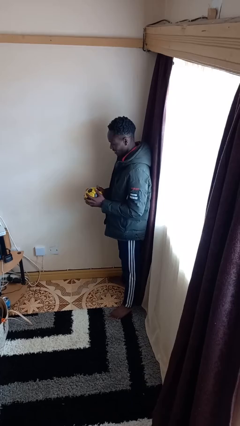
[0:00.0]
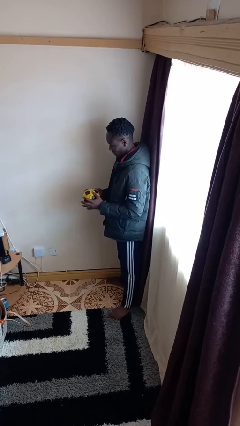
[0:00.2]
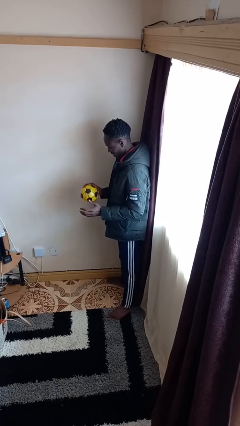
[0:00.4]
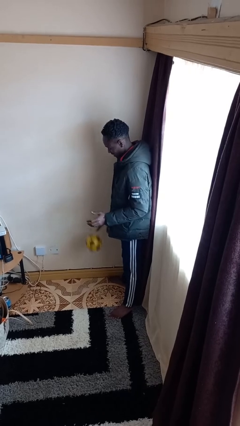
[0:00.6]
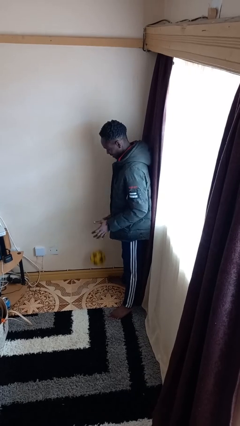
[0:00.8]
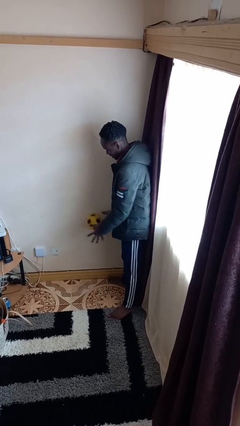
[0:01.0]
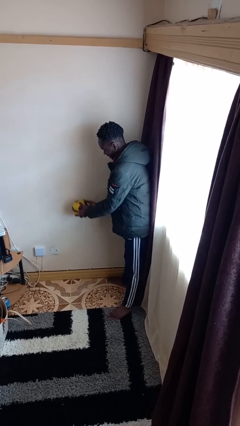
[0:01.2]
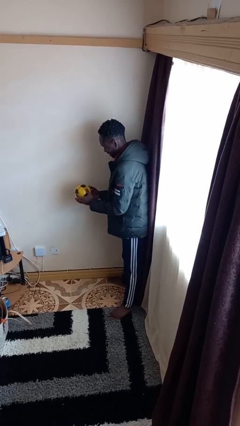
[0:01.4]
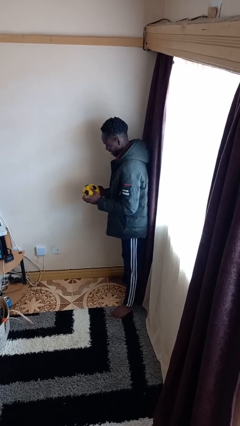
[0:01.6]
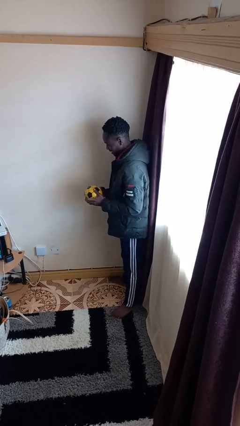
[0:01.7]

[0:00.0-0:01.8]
person bounces ball on floor

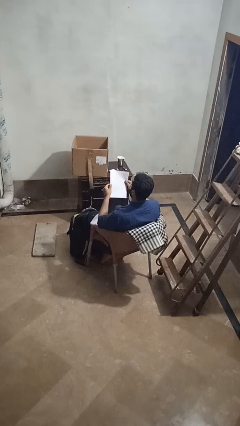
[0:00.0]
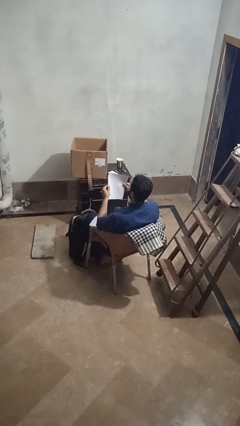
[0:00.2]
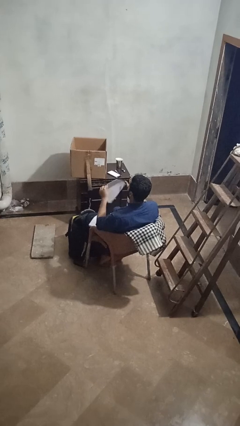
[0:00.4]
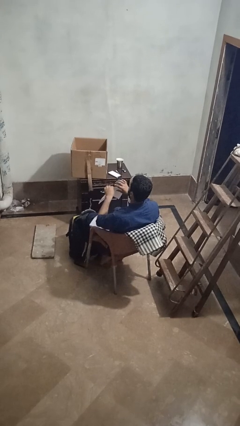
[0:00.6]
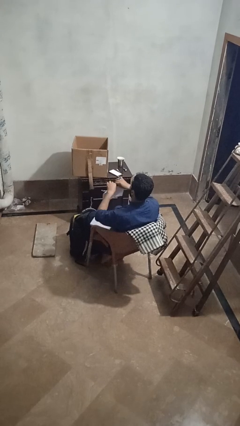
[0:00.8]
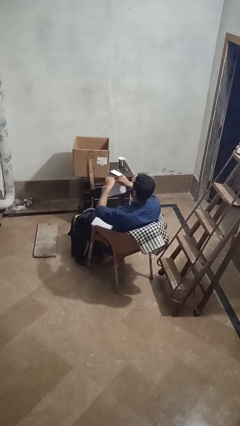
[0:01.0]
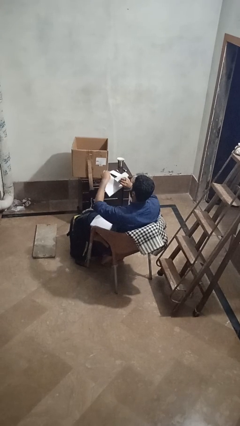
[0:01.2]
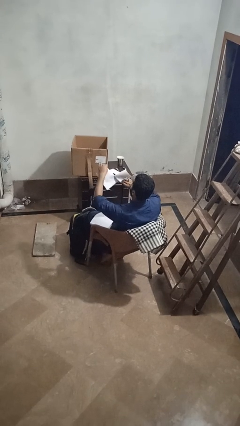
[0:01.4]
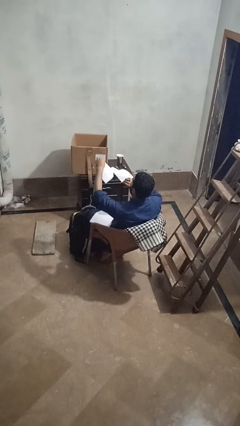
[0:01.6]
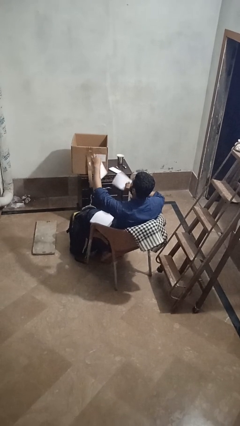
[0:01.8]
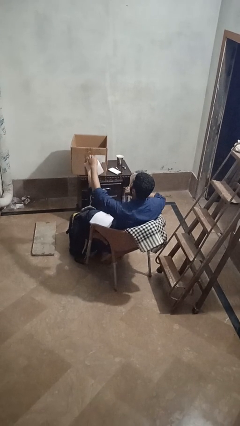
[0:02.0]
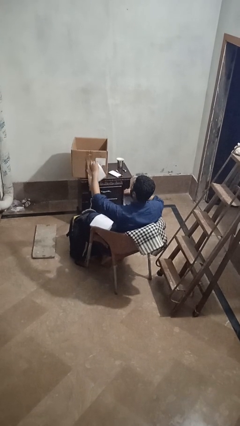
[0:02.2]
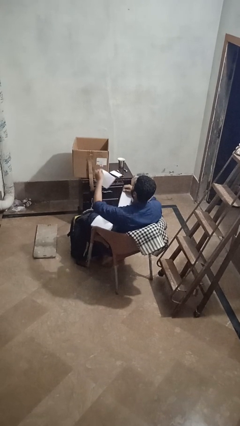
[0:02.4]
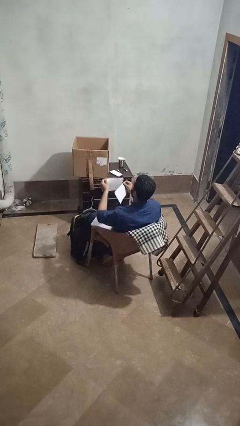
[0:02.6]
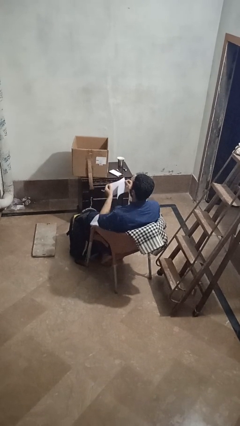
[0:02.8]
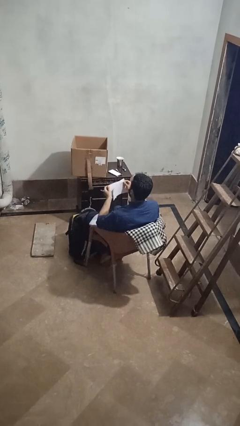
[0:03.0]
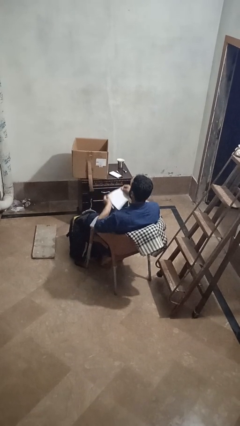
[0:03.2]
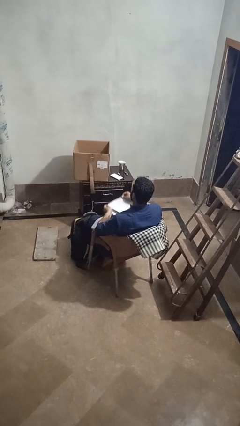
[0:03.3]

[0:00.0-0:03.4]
person tears paper

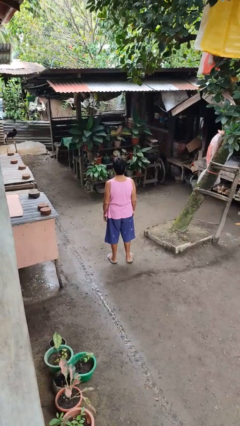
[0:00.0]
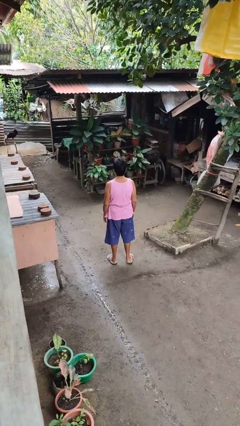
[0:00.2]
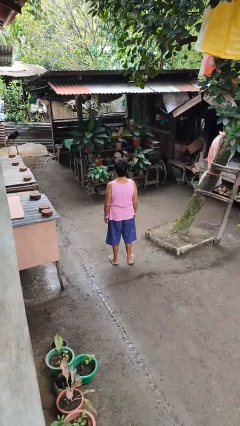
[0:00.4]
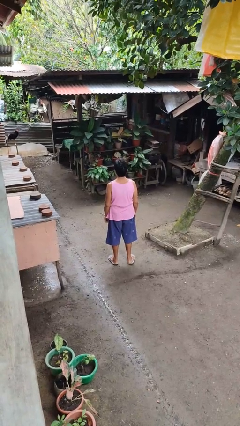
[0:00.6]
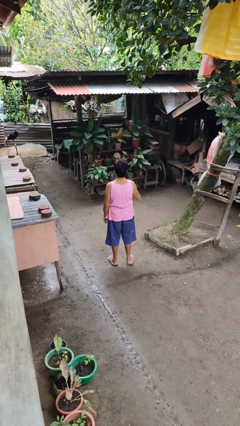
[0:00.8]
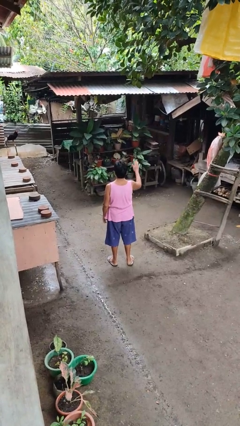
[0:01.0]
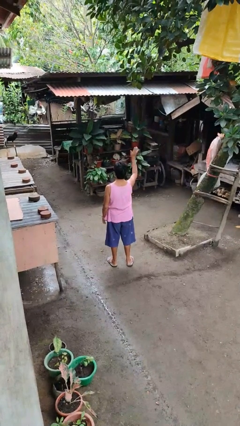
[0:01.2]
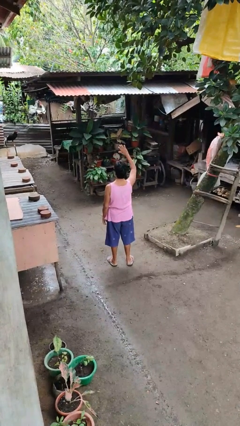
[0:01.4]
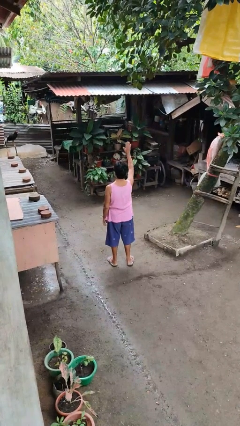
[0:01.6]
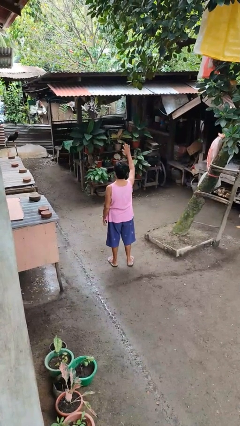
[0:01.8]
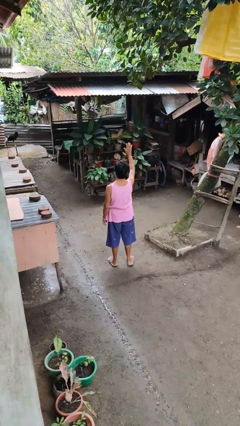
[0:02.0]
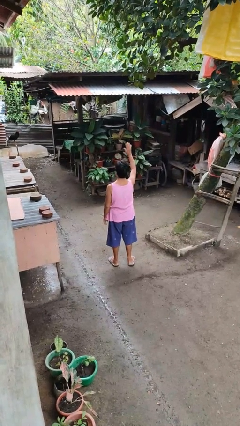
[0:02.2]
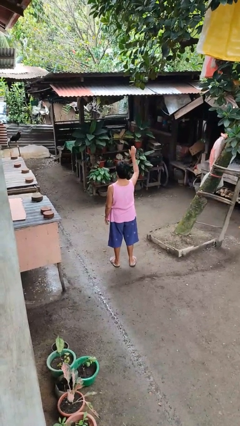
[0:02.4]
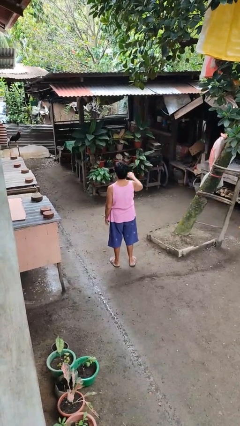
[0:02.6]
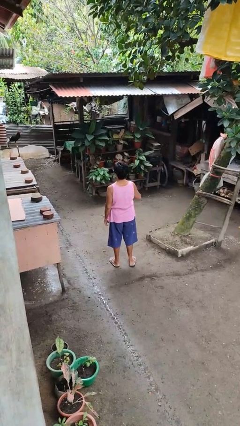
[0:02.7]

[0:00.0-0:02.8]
person waves at person

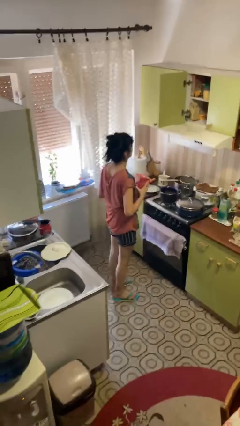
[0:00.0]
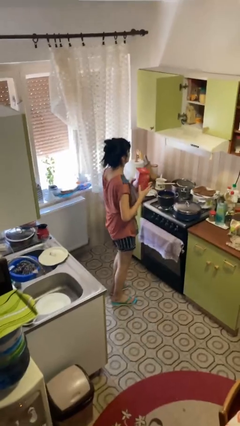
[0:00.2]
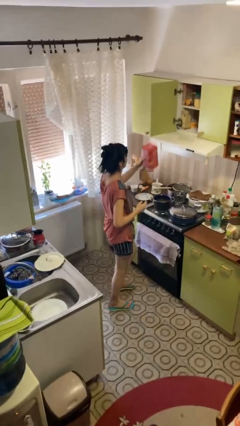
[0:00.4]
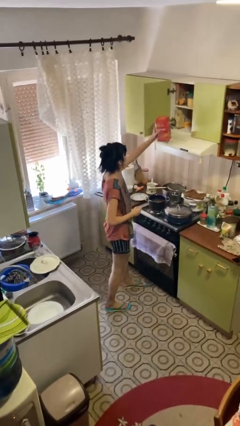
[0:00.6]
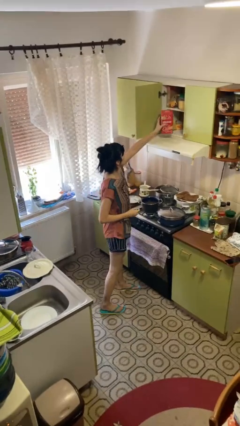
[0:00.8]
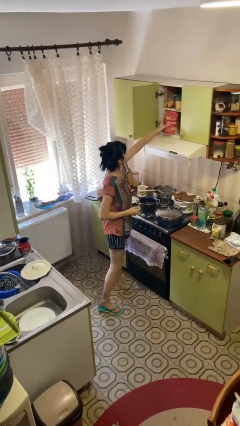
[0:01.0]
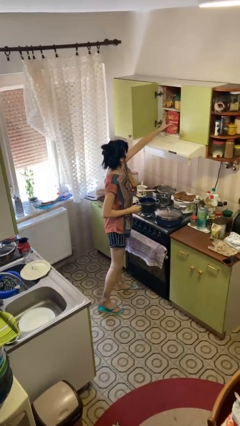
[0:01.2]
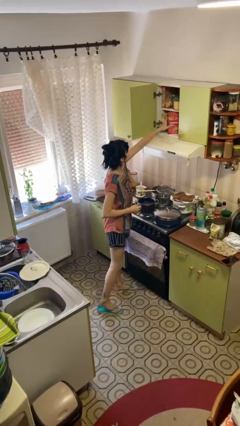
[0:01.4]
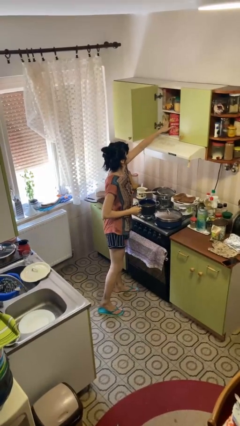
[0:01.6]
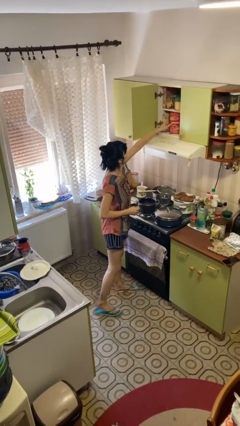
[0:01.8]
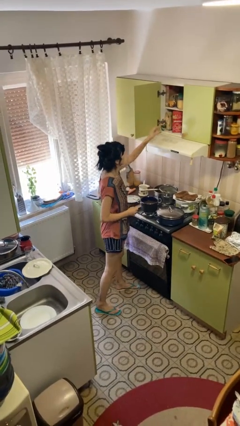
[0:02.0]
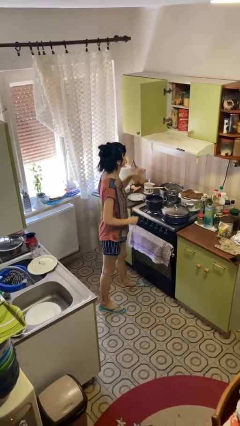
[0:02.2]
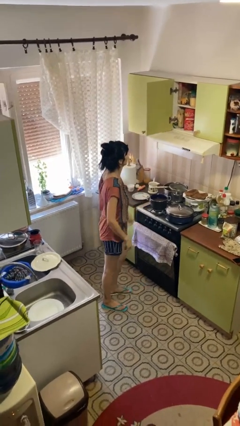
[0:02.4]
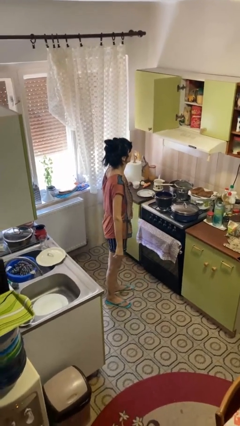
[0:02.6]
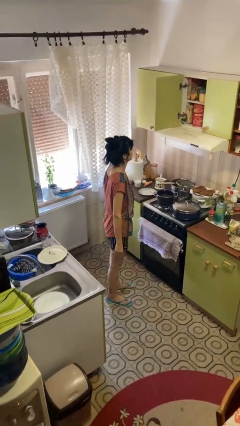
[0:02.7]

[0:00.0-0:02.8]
person puts down object into cabinet

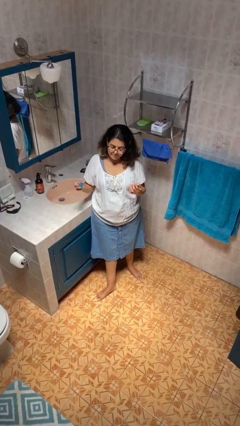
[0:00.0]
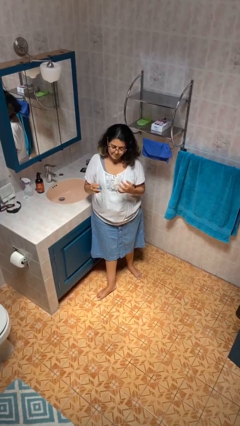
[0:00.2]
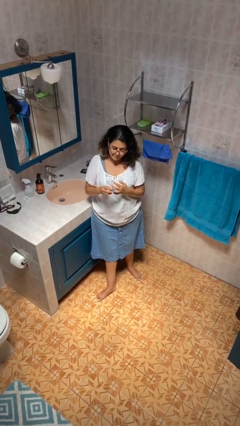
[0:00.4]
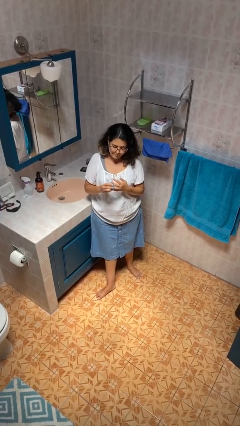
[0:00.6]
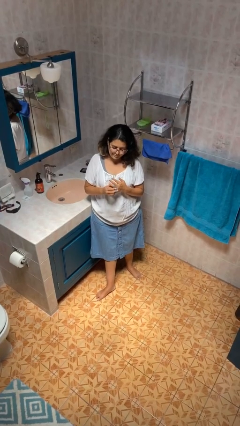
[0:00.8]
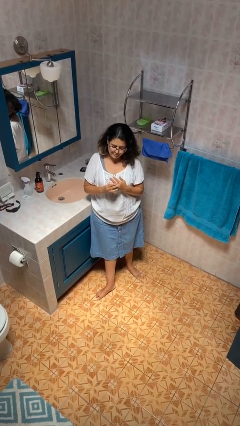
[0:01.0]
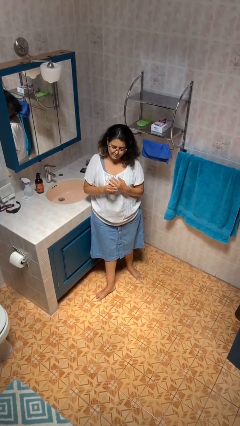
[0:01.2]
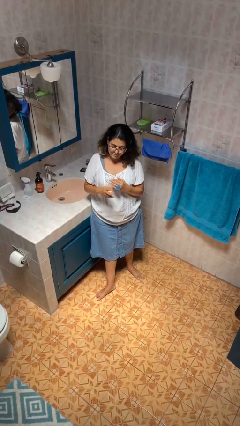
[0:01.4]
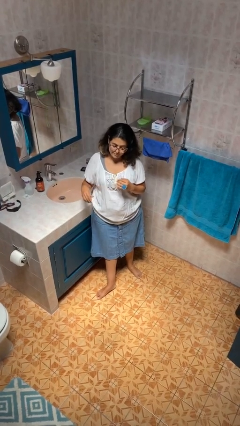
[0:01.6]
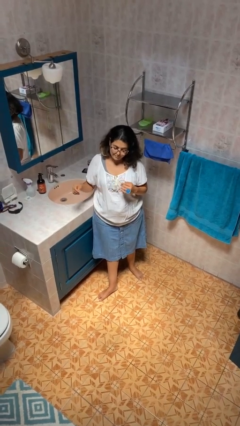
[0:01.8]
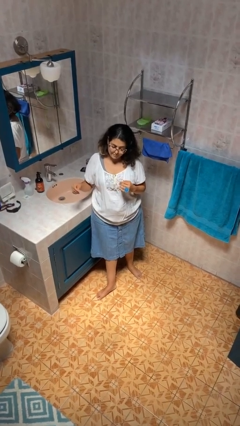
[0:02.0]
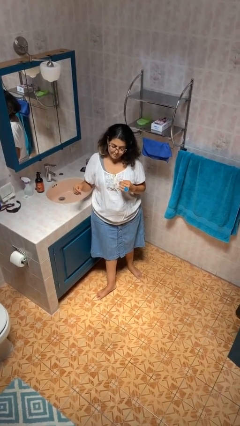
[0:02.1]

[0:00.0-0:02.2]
person puts on ring

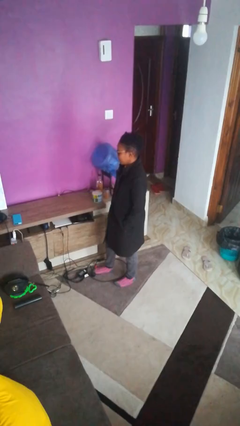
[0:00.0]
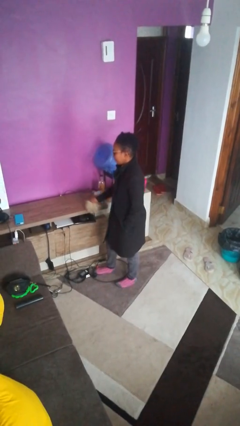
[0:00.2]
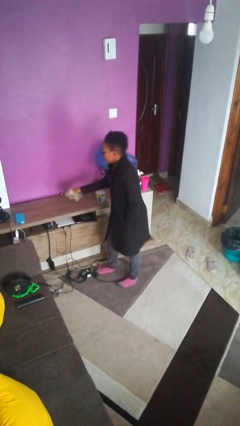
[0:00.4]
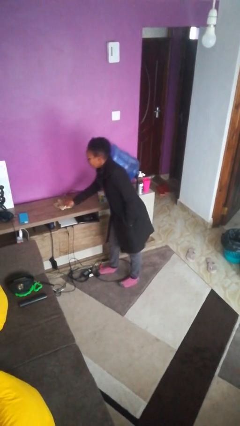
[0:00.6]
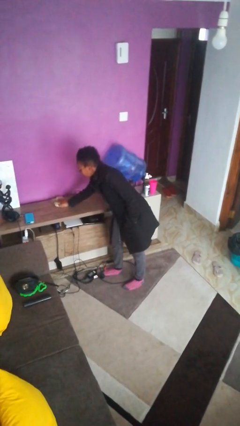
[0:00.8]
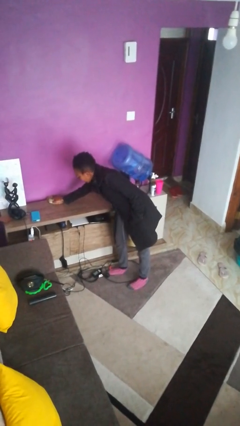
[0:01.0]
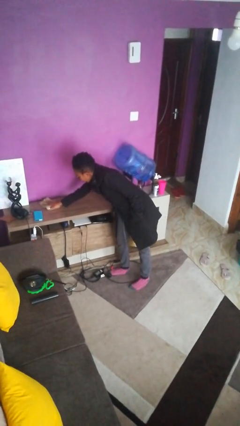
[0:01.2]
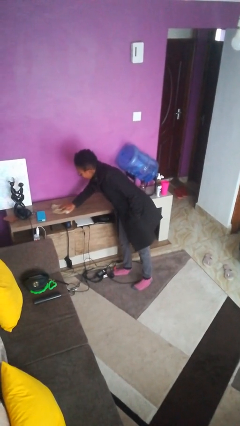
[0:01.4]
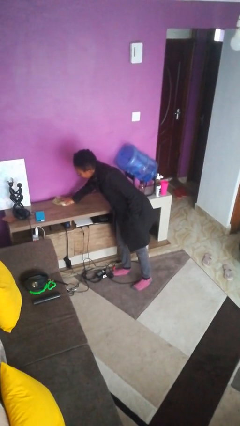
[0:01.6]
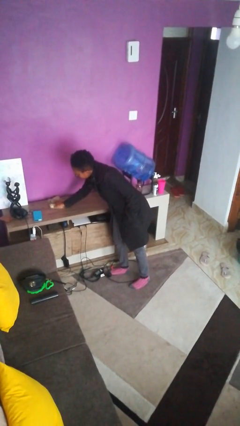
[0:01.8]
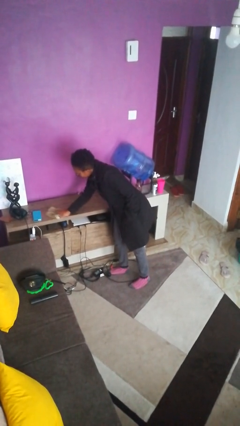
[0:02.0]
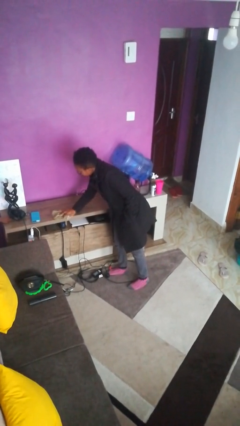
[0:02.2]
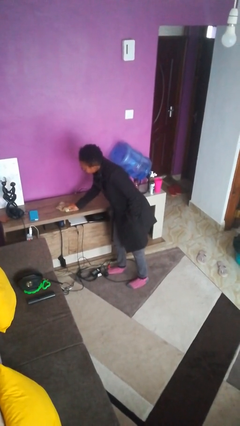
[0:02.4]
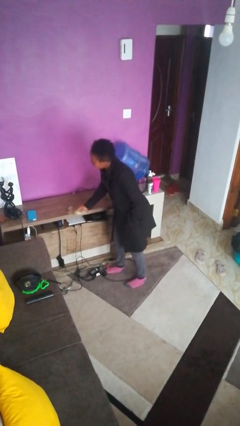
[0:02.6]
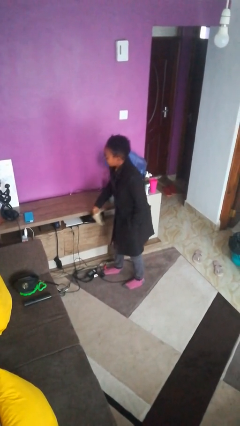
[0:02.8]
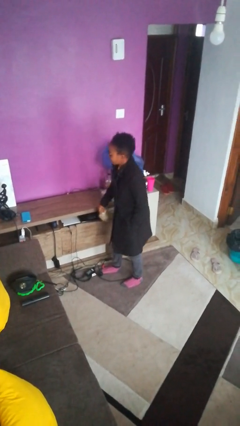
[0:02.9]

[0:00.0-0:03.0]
person cleans table with rag

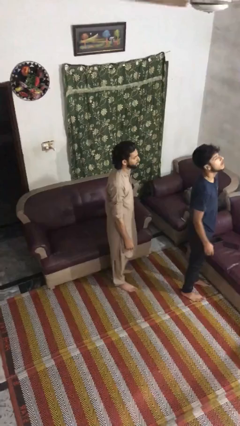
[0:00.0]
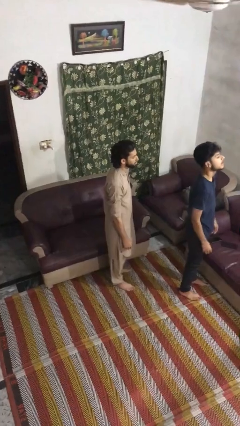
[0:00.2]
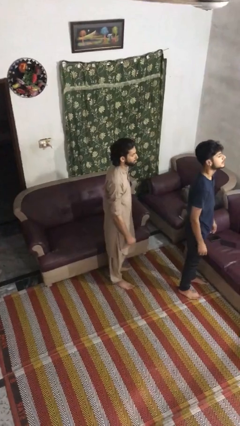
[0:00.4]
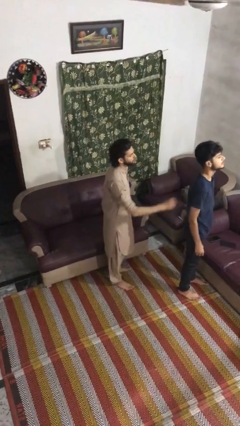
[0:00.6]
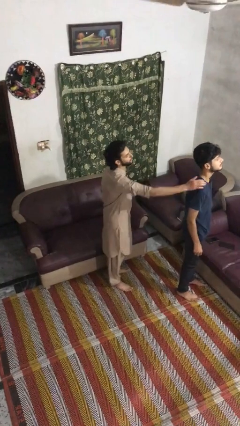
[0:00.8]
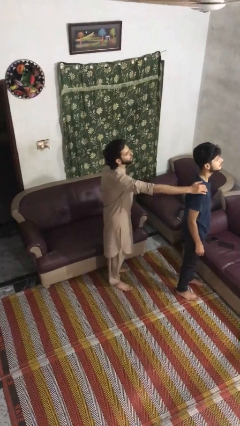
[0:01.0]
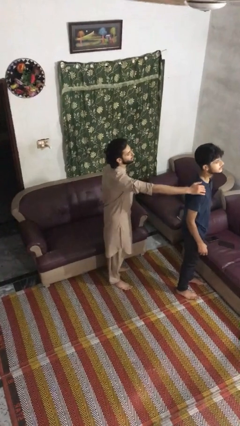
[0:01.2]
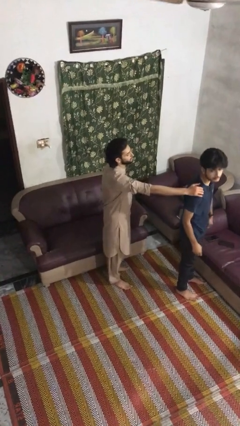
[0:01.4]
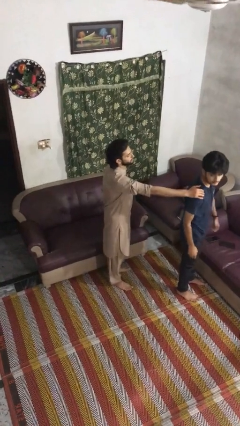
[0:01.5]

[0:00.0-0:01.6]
person grabs person by shoulder
